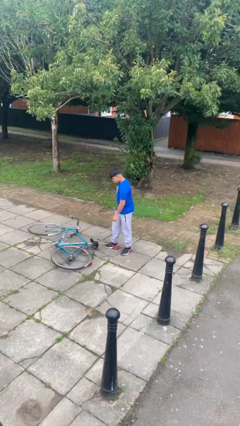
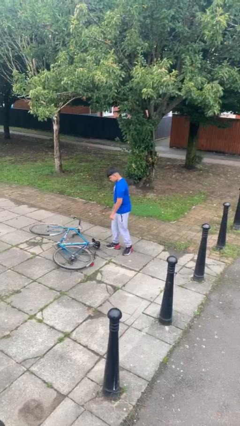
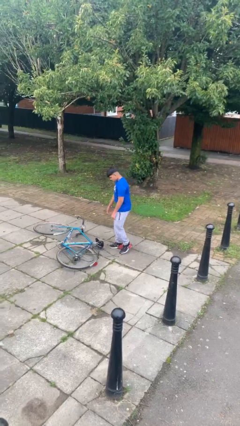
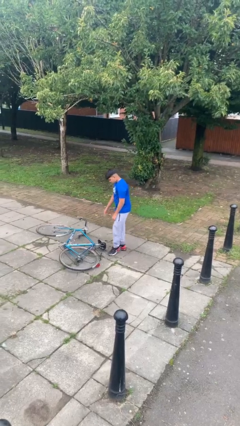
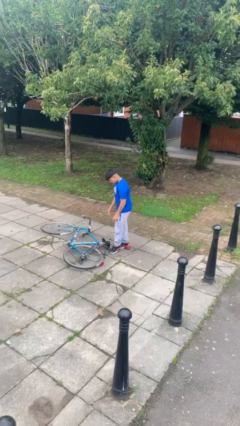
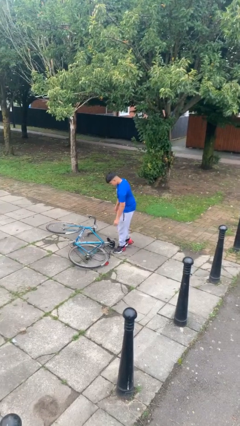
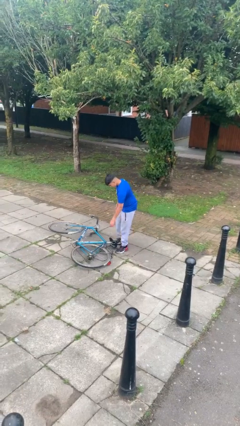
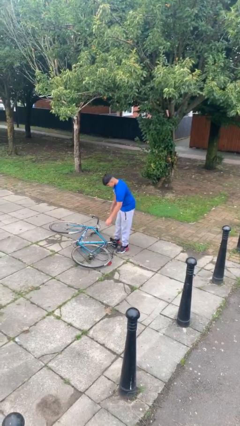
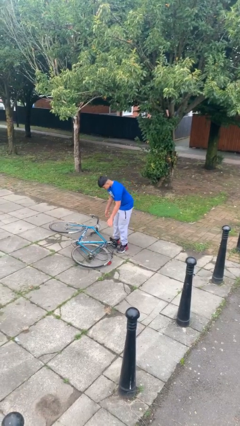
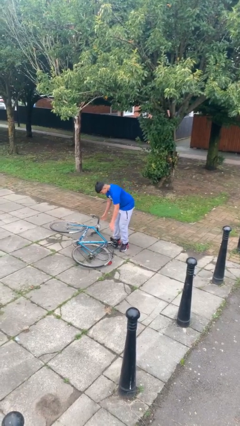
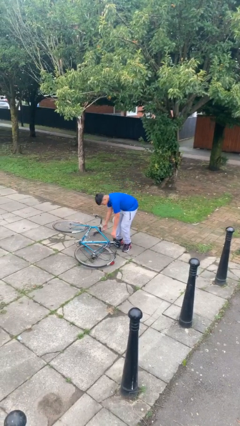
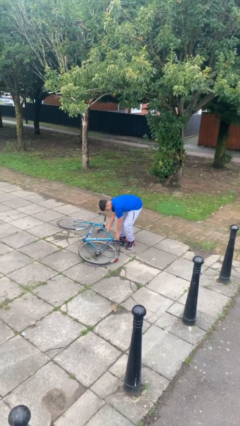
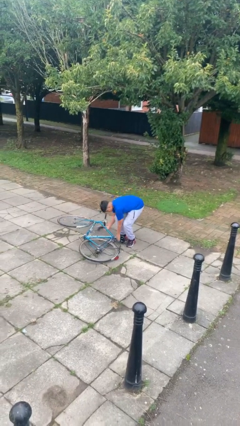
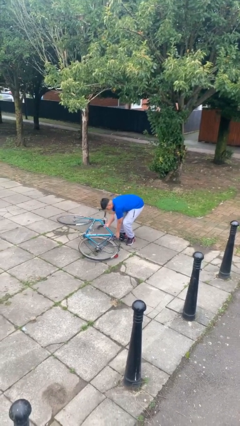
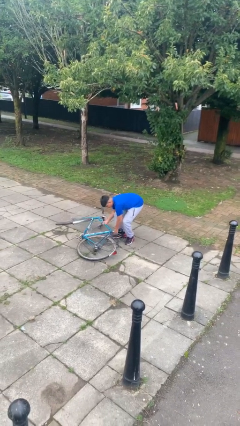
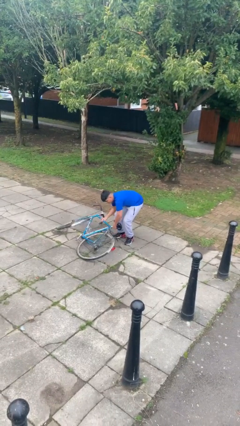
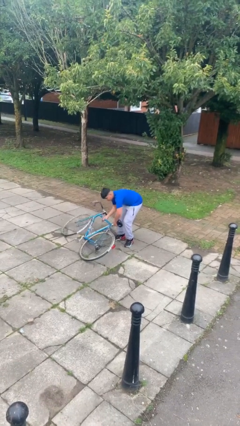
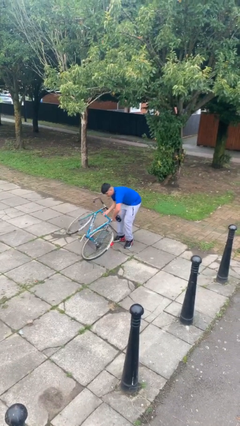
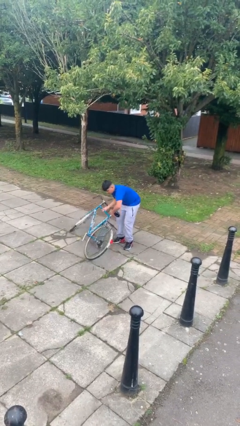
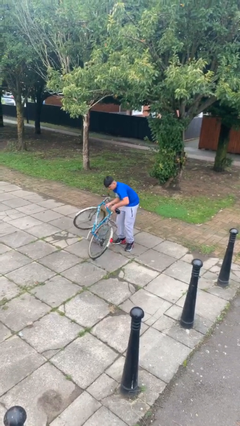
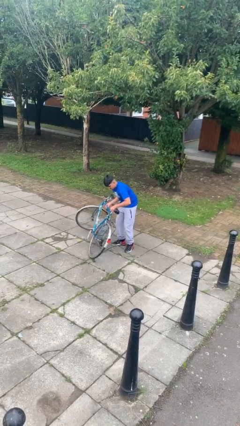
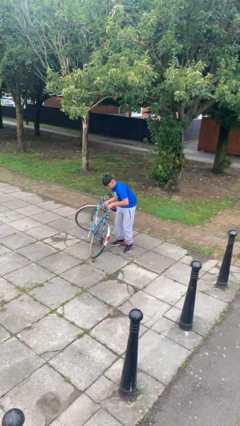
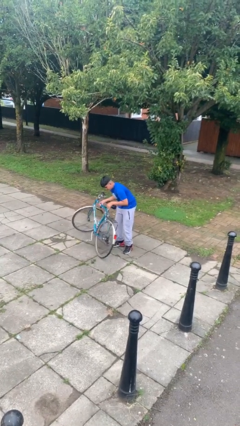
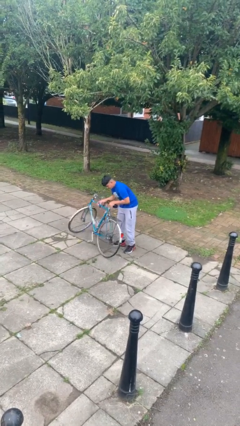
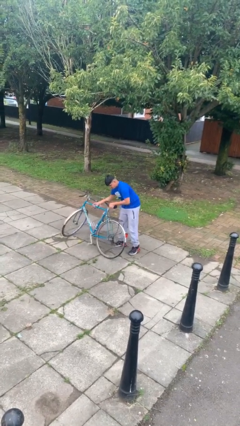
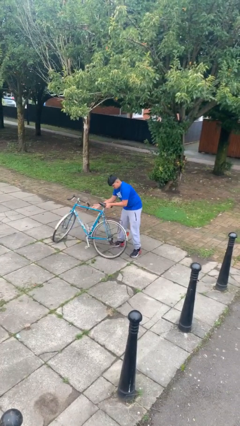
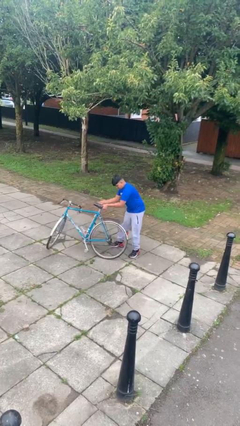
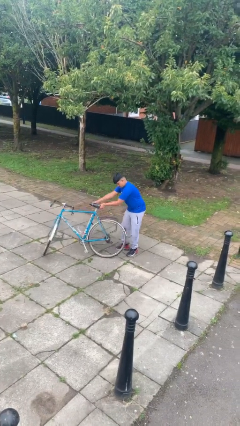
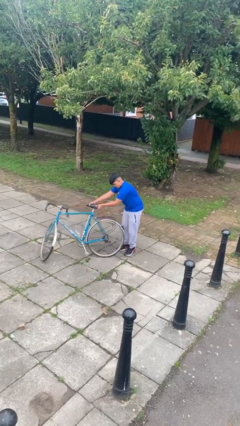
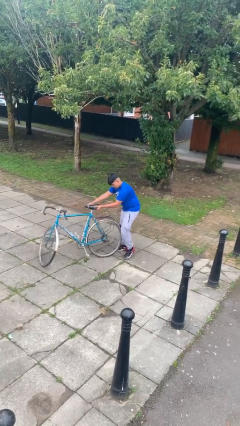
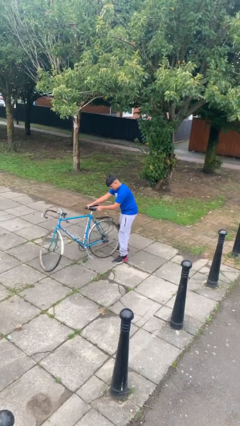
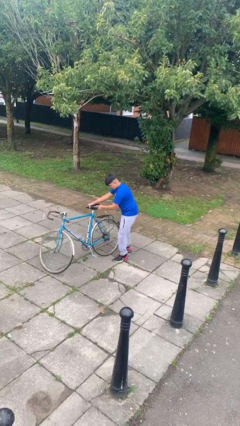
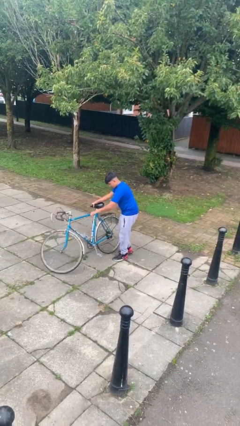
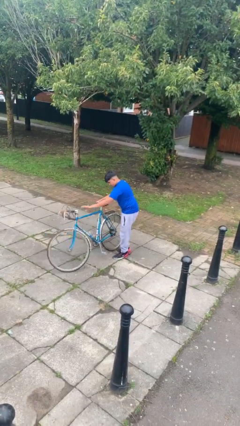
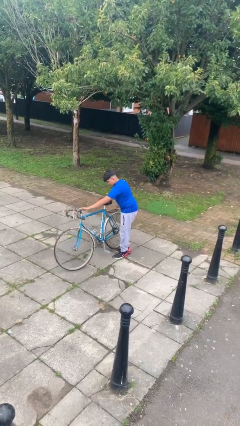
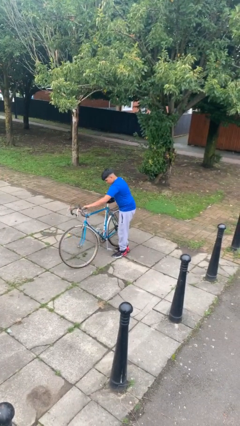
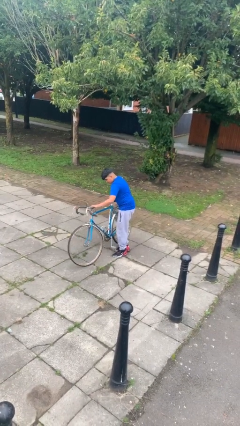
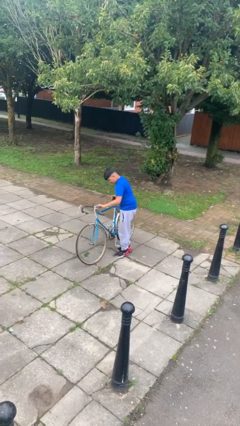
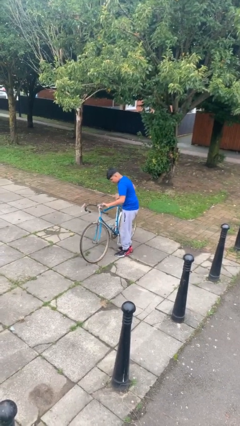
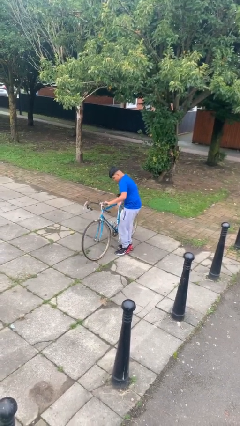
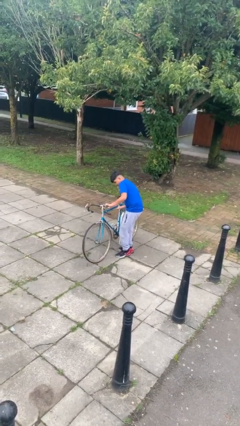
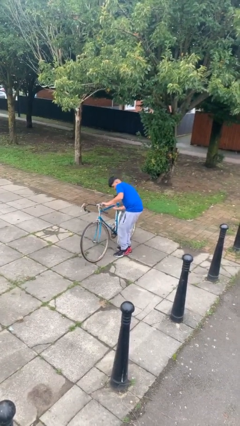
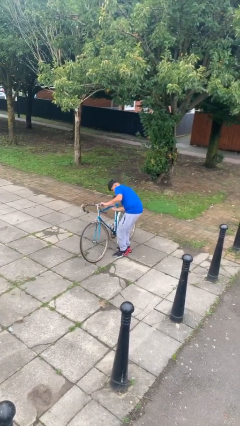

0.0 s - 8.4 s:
person picks up object from floor

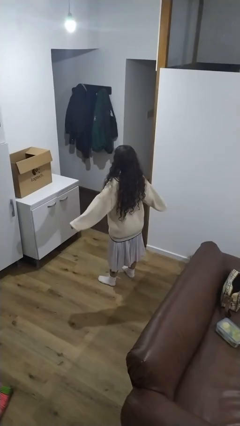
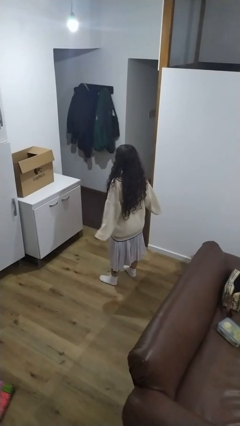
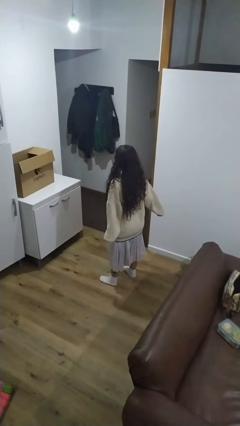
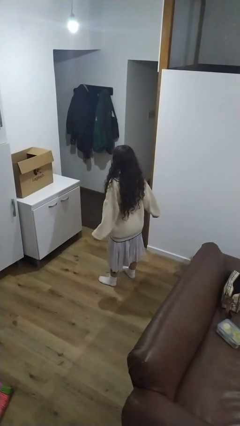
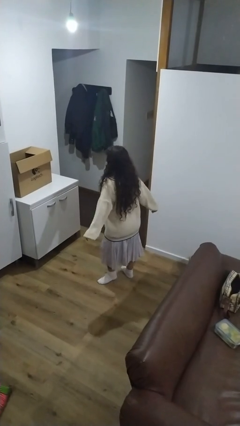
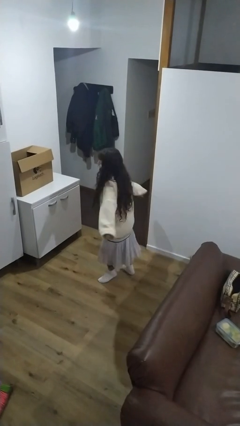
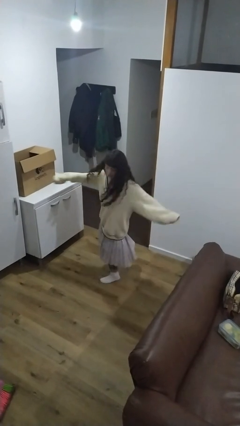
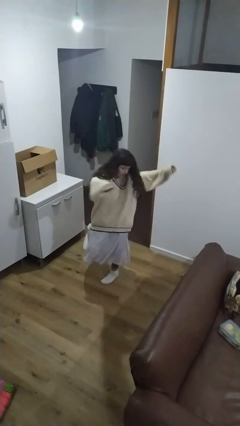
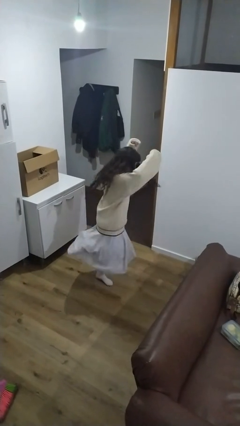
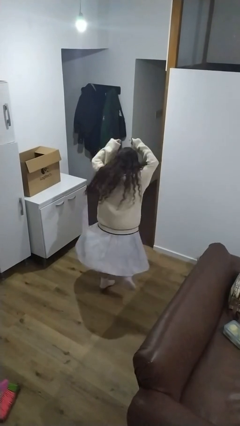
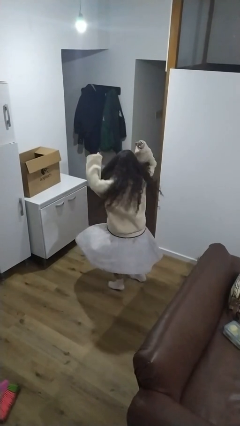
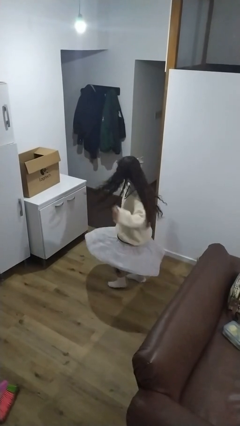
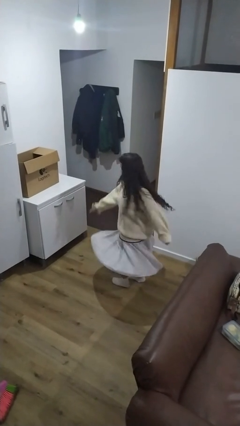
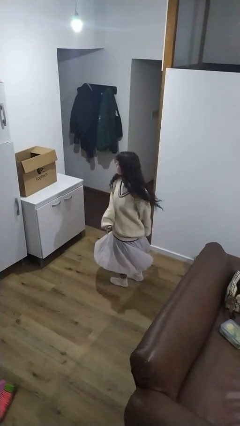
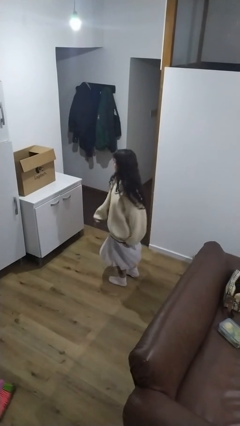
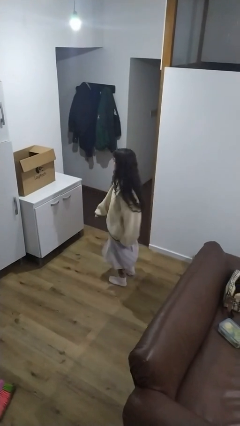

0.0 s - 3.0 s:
person twirls

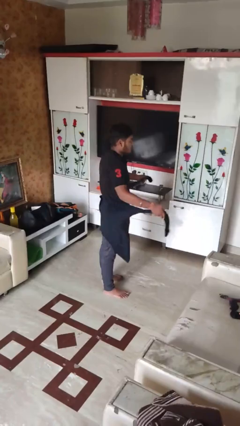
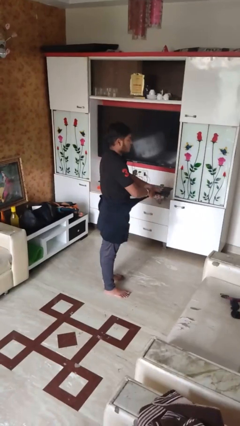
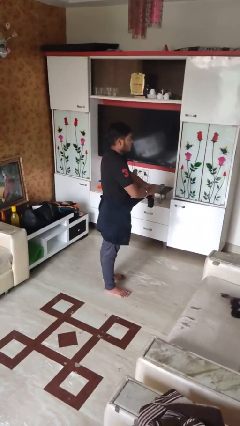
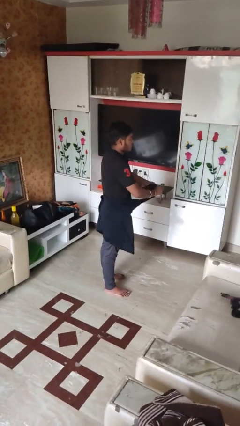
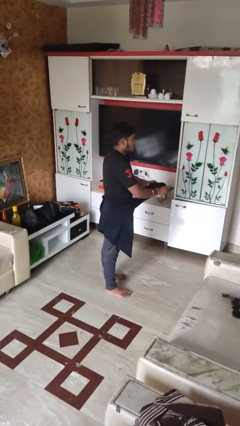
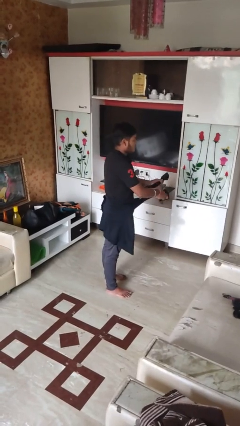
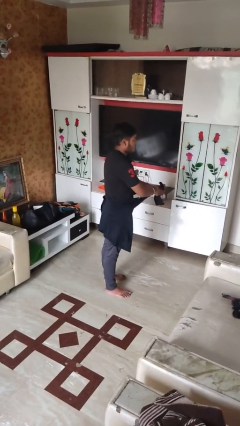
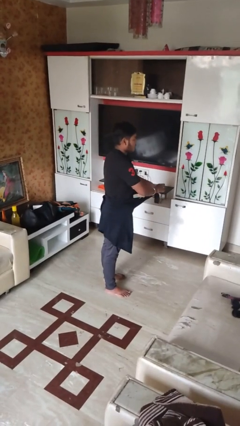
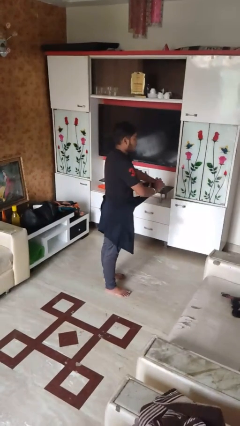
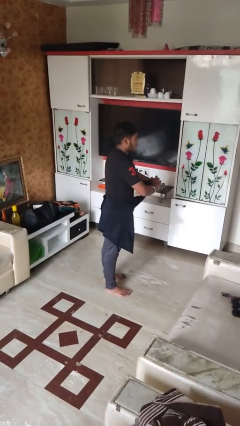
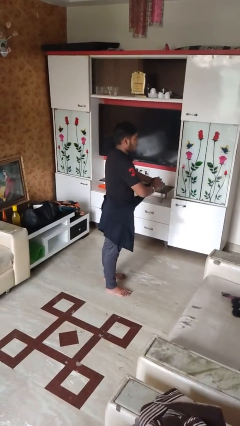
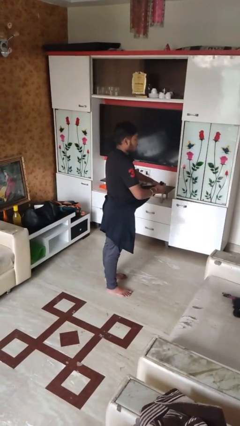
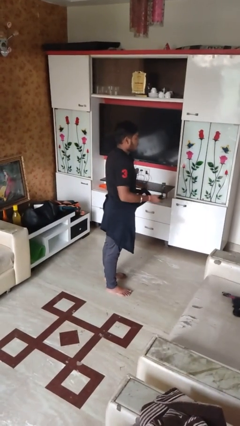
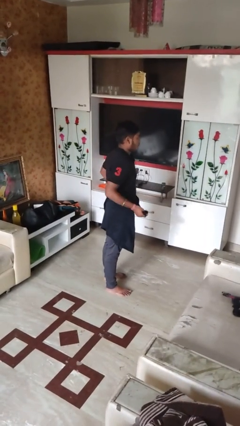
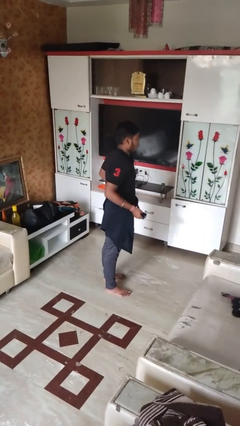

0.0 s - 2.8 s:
person ties jacket around waist

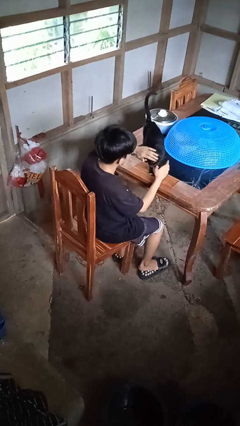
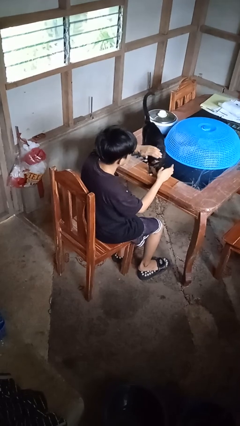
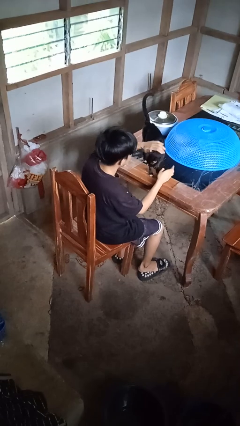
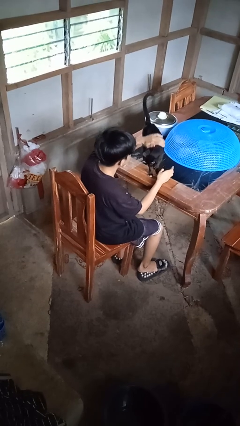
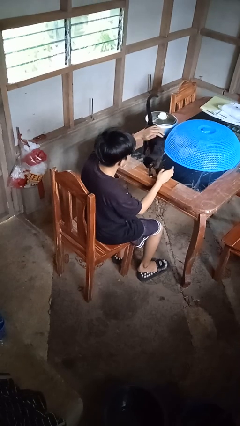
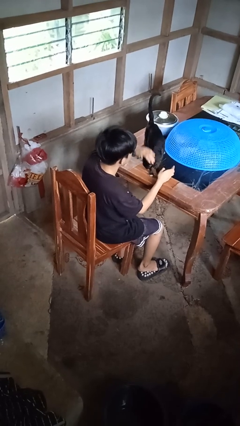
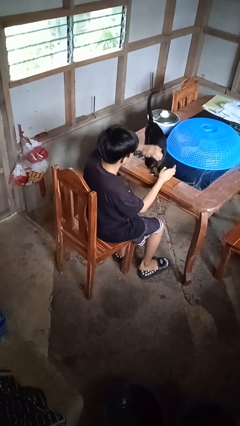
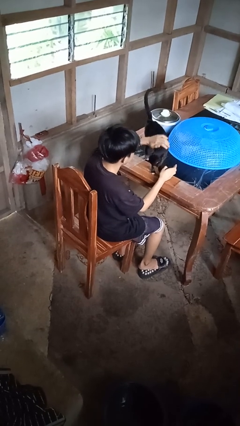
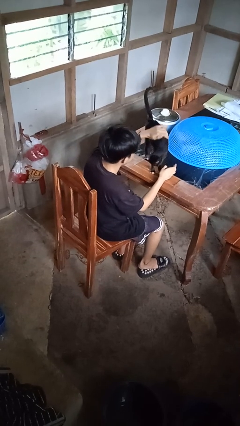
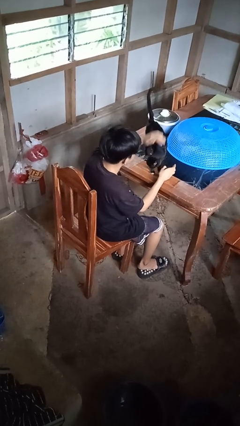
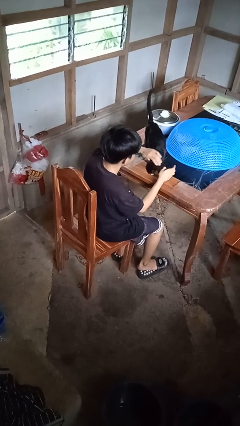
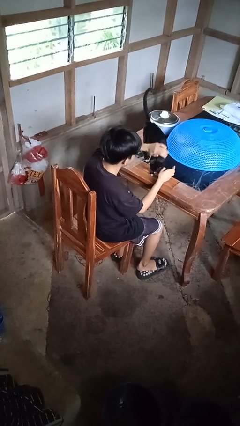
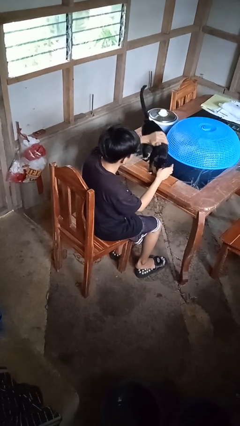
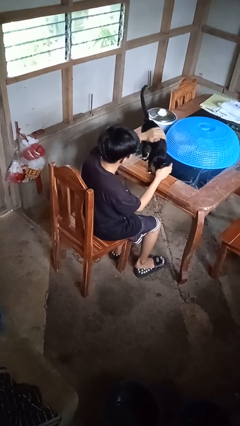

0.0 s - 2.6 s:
person pets cat

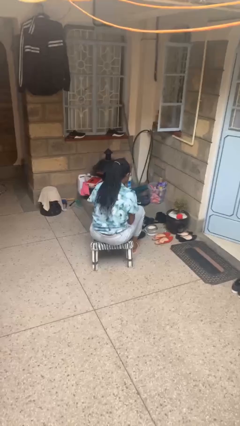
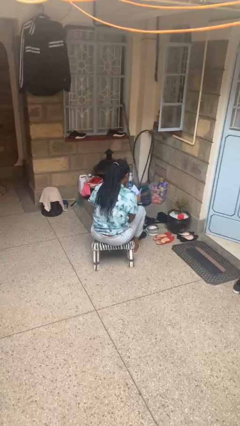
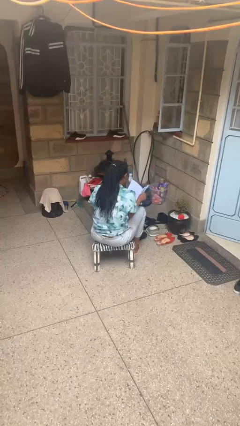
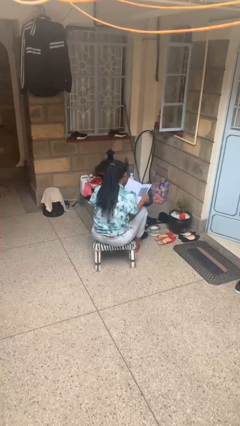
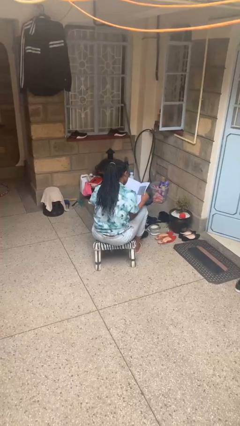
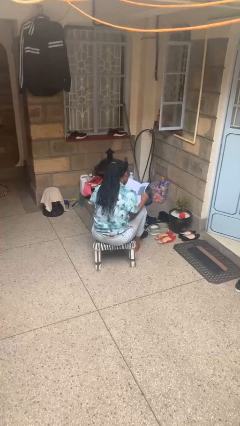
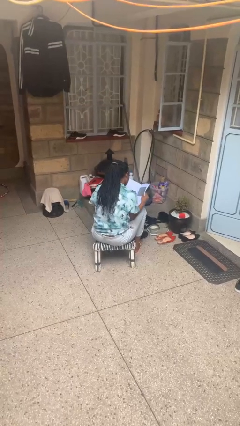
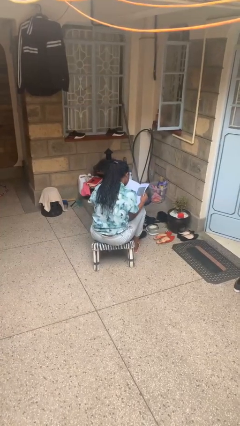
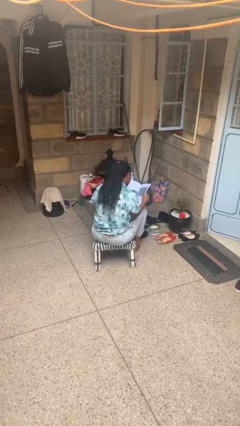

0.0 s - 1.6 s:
person reads magazine
